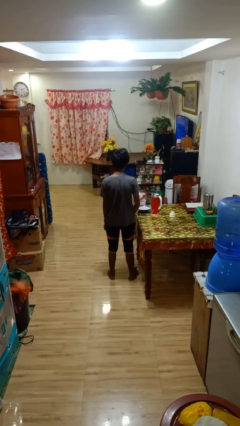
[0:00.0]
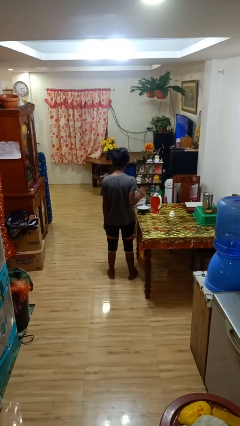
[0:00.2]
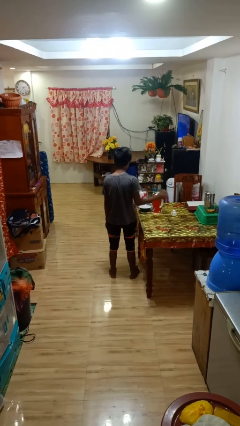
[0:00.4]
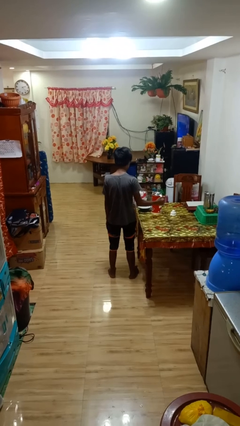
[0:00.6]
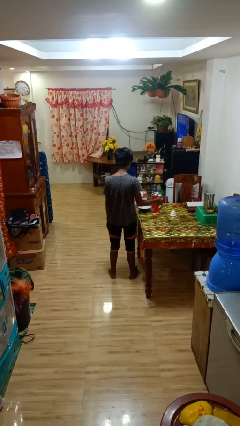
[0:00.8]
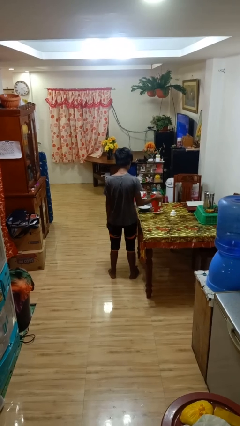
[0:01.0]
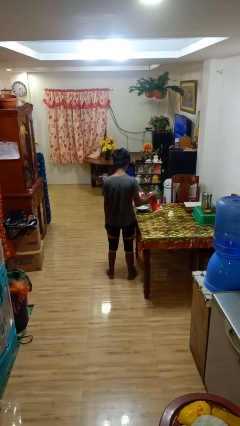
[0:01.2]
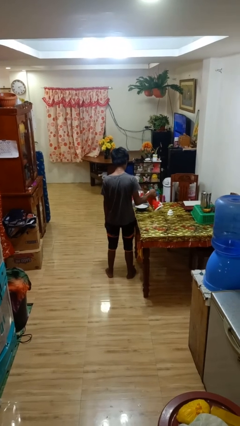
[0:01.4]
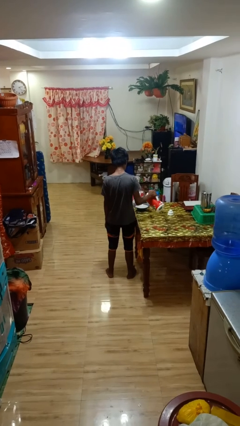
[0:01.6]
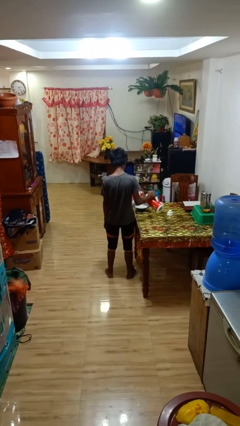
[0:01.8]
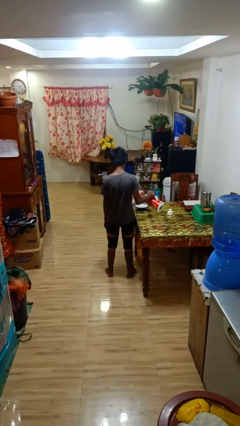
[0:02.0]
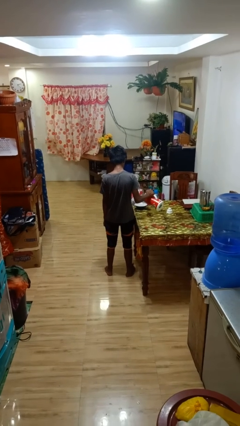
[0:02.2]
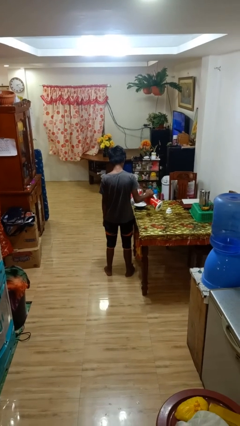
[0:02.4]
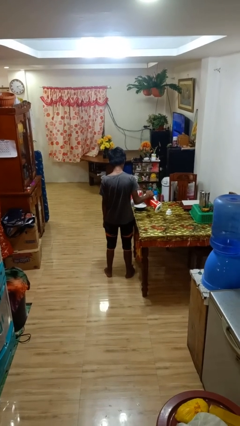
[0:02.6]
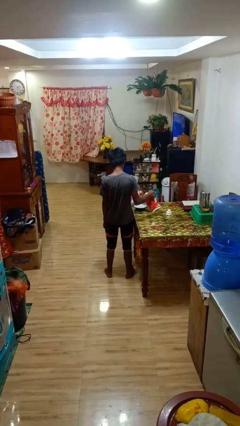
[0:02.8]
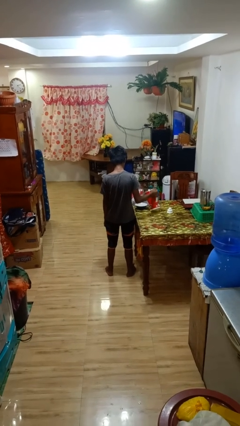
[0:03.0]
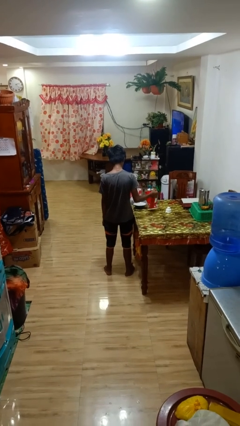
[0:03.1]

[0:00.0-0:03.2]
person pours into bowl

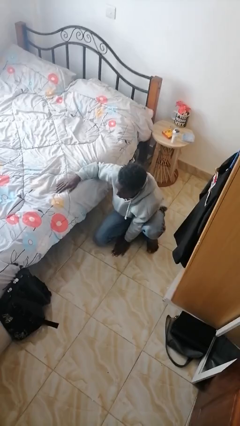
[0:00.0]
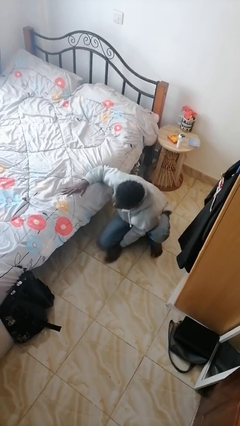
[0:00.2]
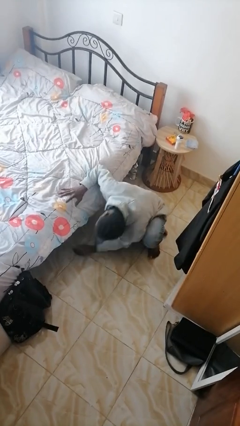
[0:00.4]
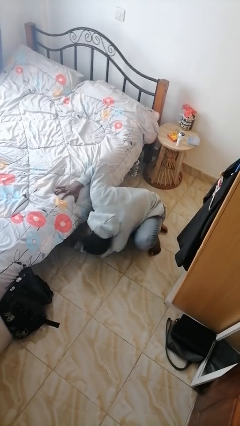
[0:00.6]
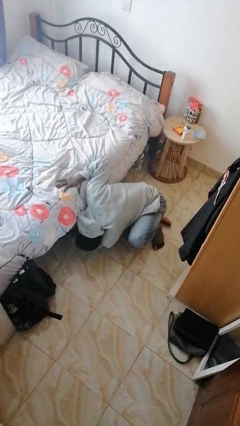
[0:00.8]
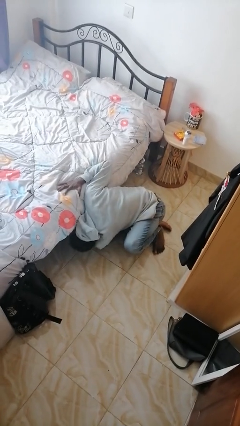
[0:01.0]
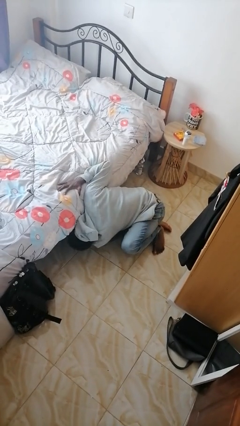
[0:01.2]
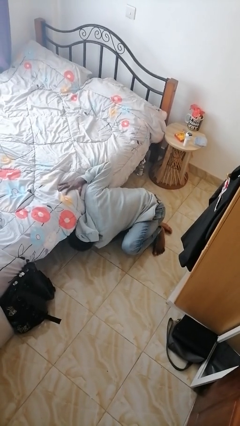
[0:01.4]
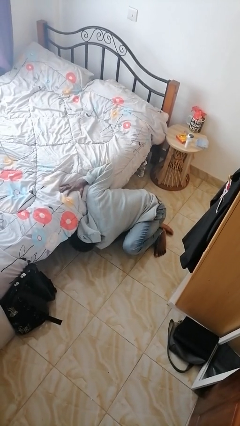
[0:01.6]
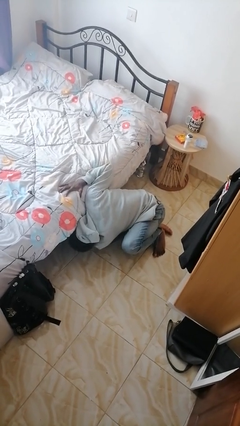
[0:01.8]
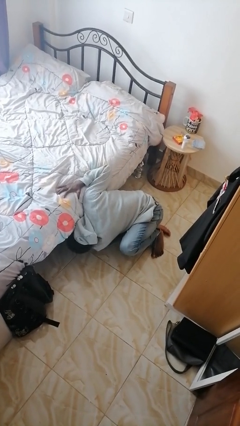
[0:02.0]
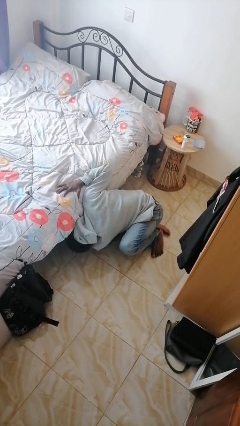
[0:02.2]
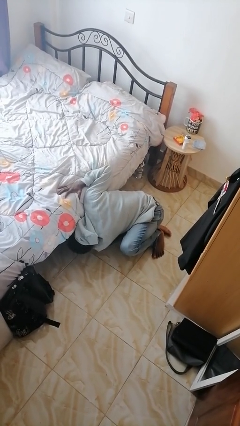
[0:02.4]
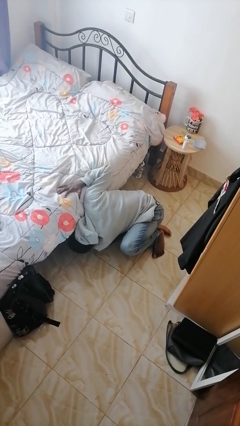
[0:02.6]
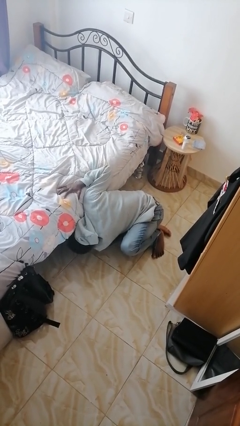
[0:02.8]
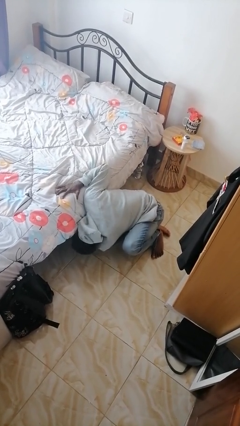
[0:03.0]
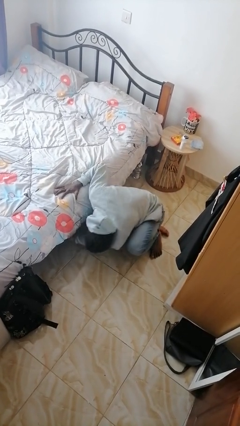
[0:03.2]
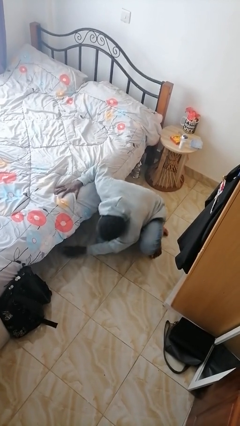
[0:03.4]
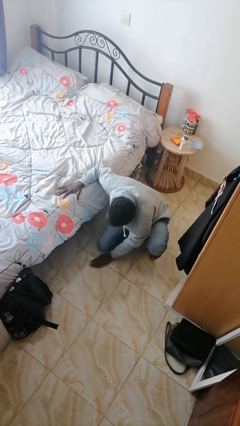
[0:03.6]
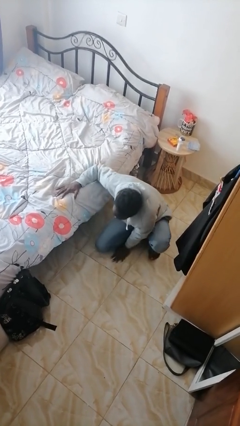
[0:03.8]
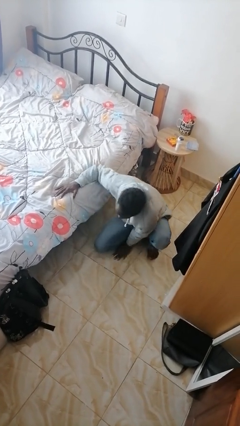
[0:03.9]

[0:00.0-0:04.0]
person searches under bed

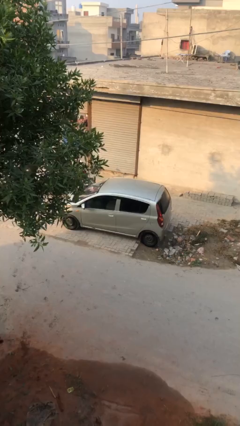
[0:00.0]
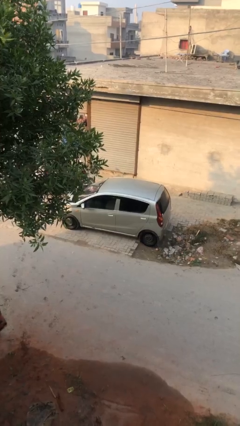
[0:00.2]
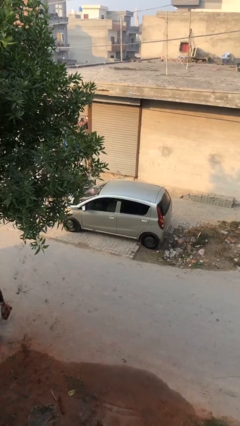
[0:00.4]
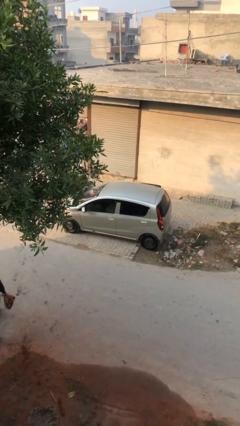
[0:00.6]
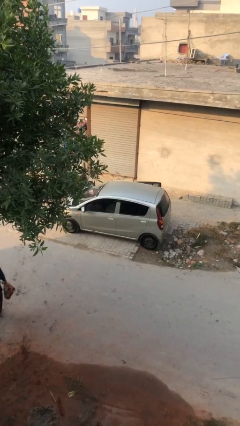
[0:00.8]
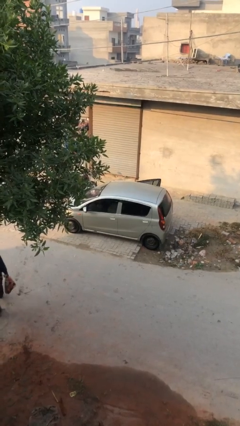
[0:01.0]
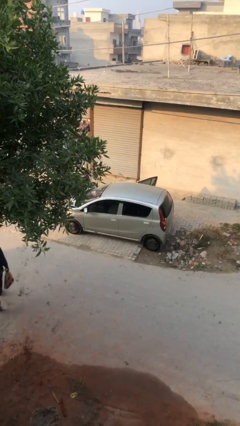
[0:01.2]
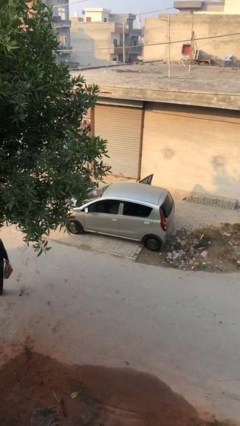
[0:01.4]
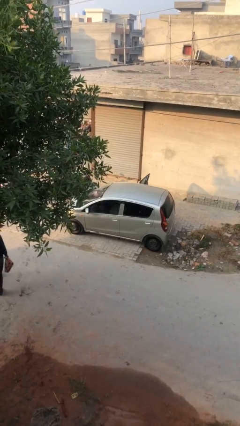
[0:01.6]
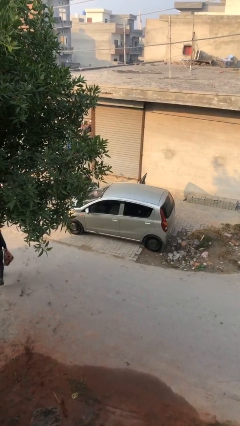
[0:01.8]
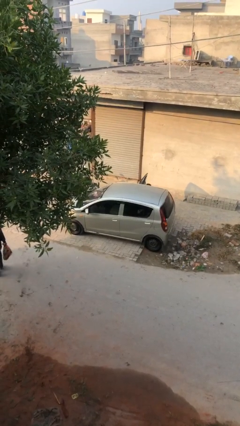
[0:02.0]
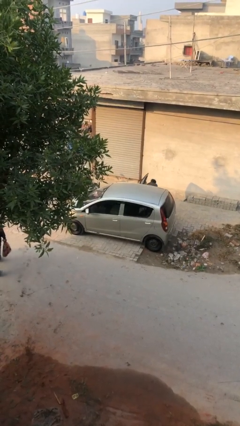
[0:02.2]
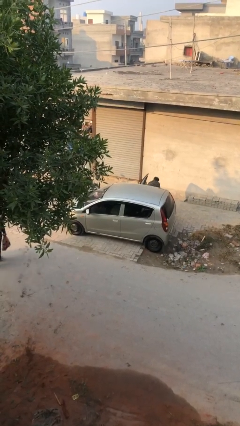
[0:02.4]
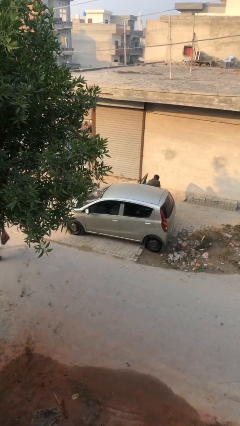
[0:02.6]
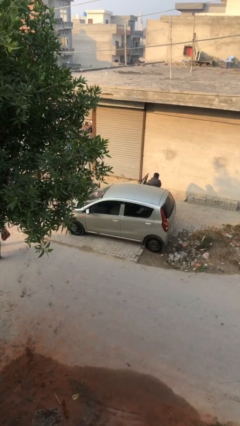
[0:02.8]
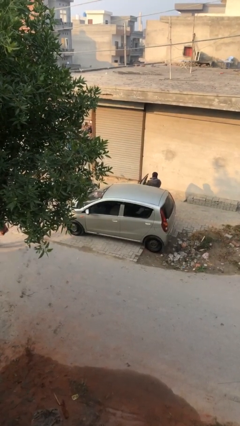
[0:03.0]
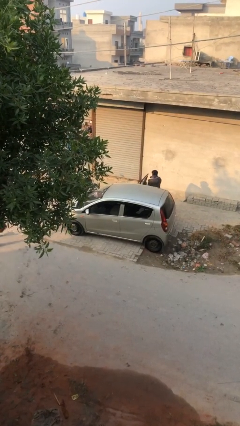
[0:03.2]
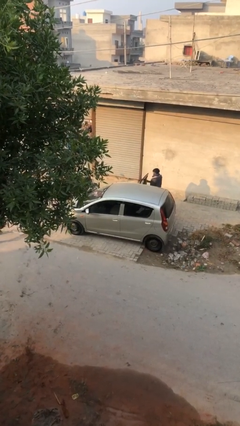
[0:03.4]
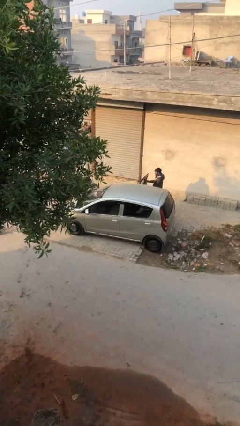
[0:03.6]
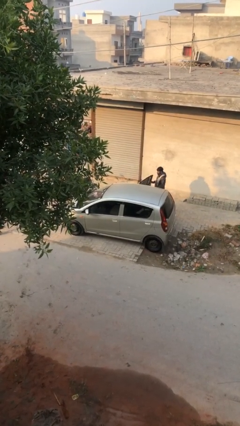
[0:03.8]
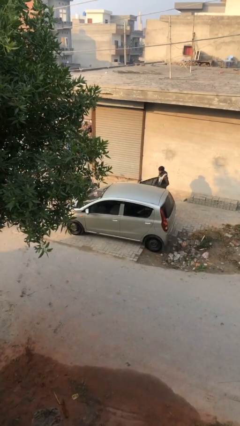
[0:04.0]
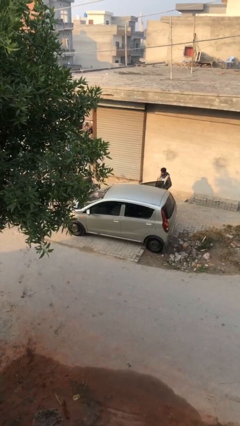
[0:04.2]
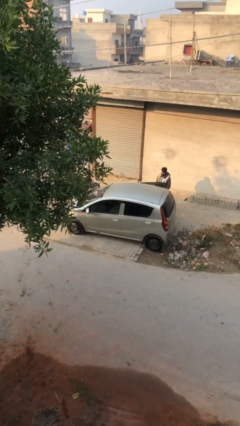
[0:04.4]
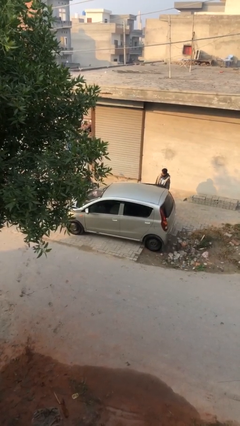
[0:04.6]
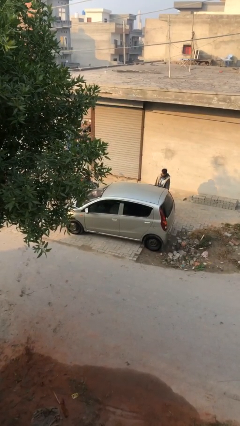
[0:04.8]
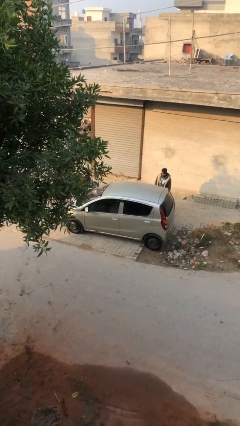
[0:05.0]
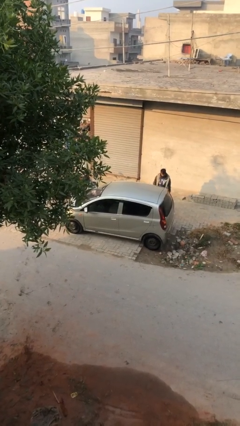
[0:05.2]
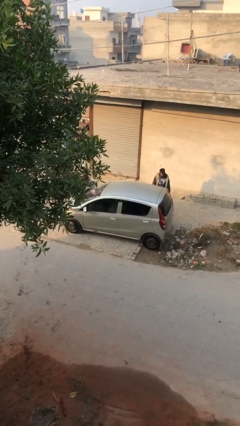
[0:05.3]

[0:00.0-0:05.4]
car drops off person

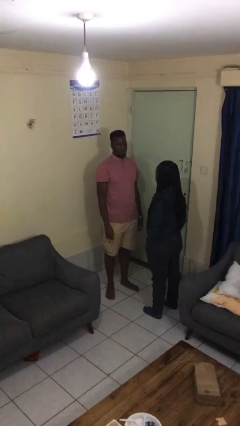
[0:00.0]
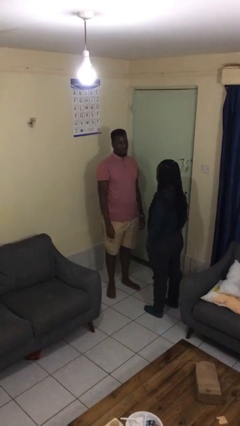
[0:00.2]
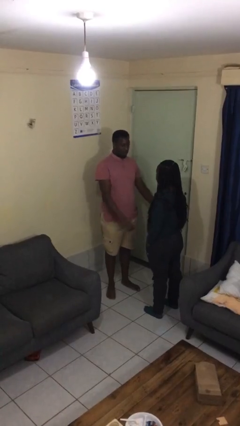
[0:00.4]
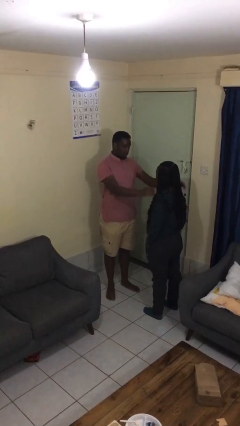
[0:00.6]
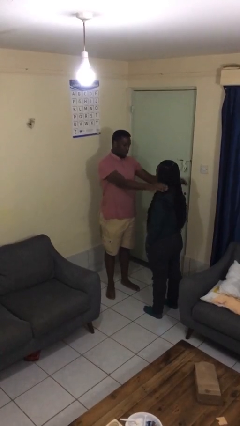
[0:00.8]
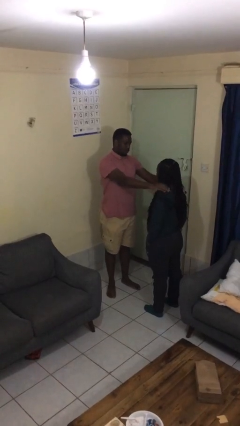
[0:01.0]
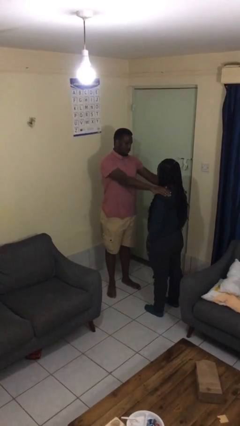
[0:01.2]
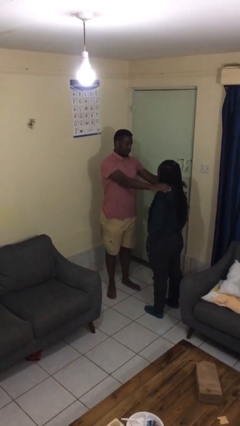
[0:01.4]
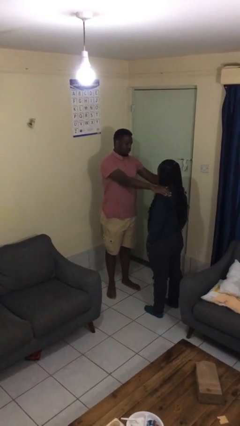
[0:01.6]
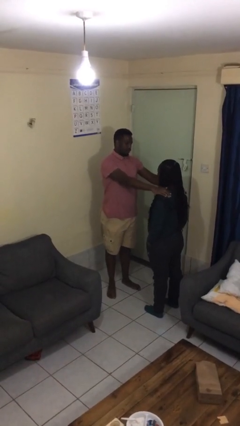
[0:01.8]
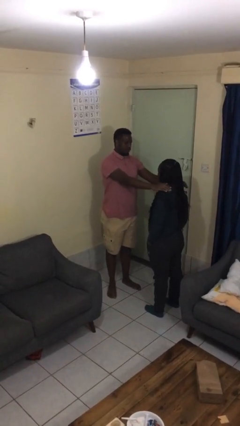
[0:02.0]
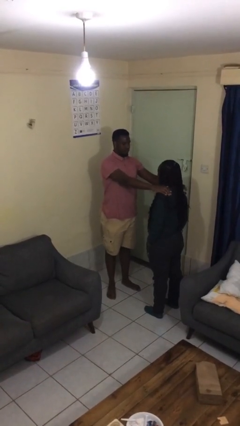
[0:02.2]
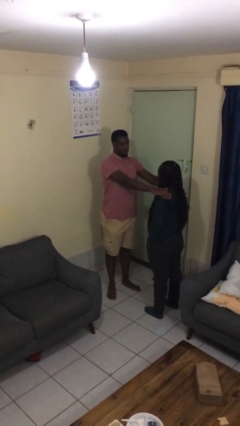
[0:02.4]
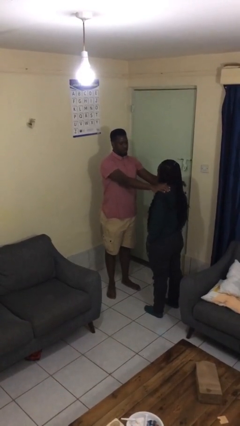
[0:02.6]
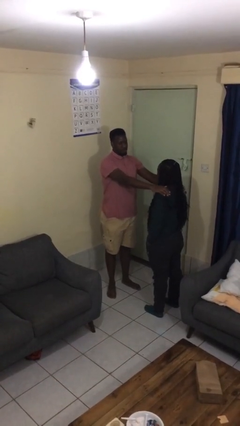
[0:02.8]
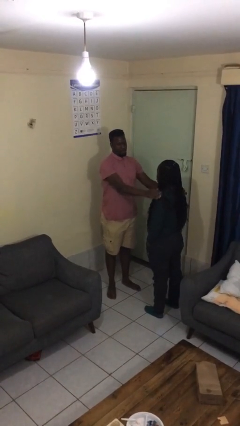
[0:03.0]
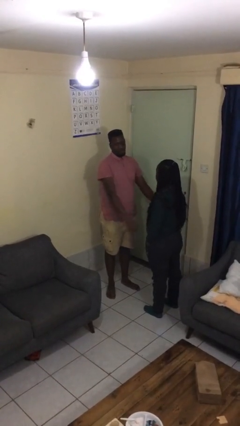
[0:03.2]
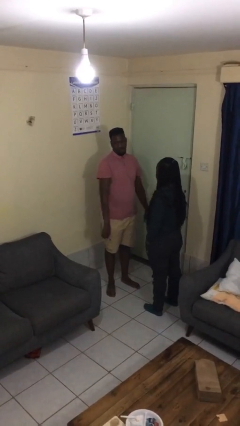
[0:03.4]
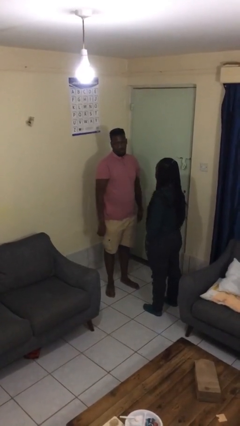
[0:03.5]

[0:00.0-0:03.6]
person pounds shoulders of person

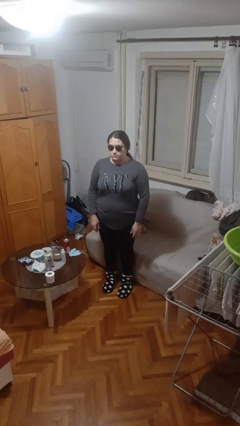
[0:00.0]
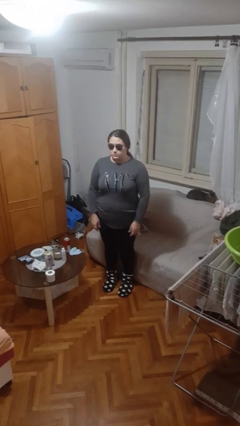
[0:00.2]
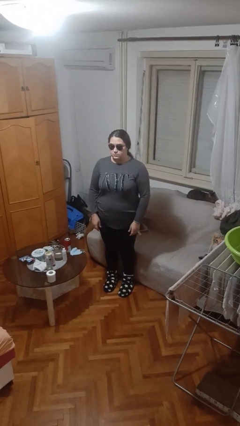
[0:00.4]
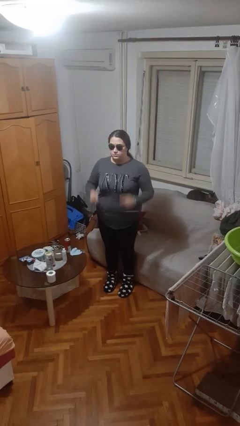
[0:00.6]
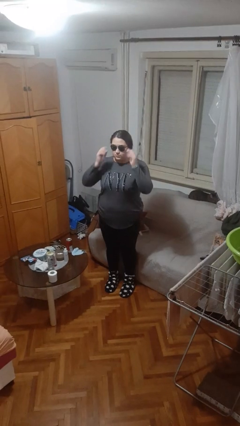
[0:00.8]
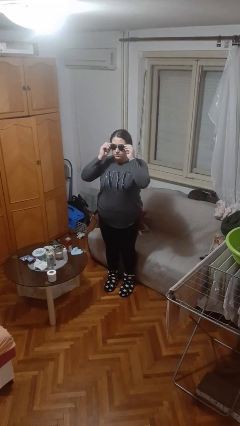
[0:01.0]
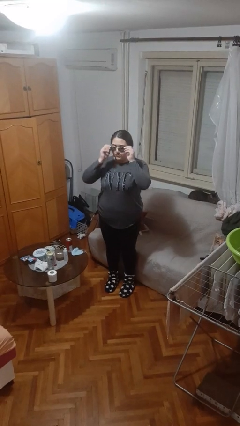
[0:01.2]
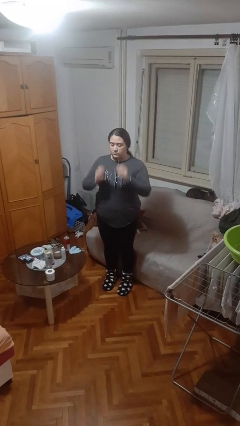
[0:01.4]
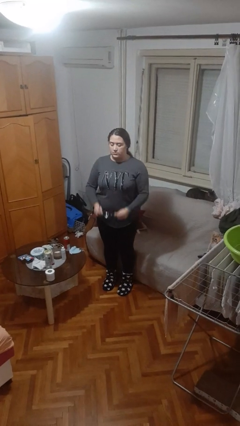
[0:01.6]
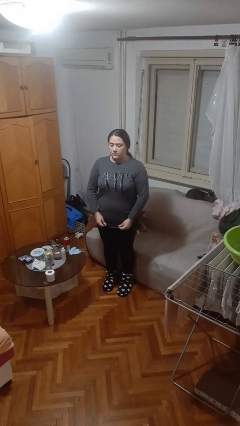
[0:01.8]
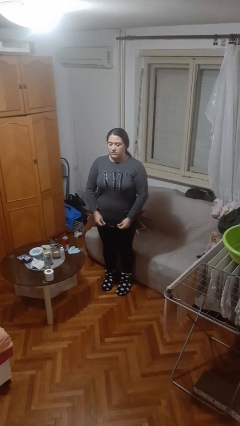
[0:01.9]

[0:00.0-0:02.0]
person takes off sunglasses
